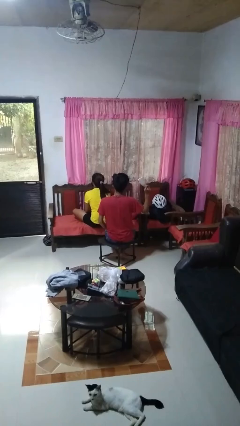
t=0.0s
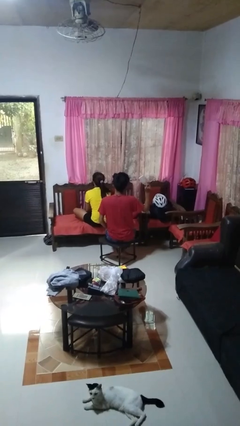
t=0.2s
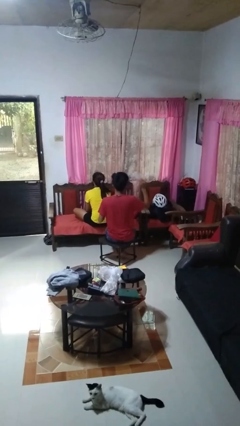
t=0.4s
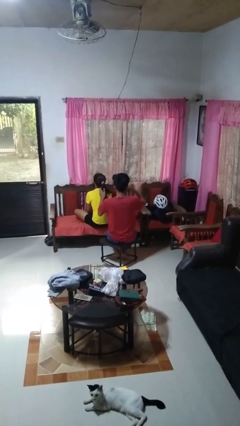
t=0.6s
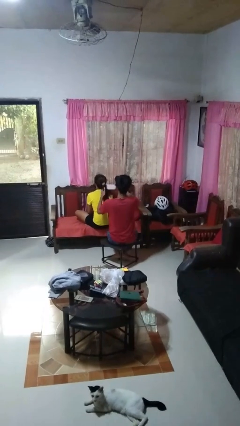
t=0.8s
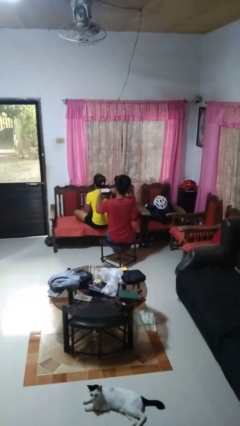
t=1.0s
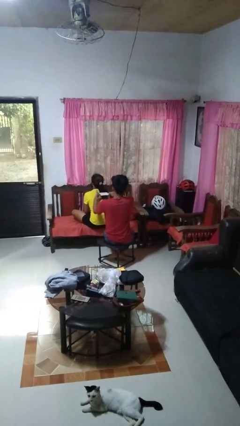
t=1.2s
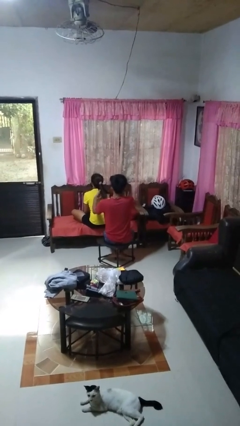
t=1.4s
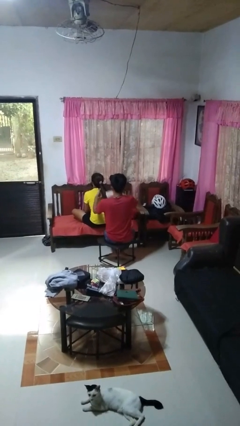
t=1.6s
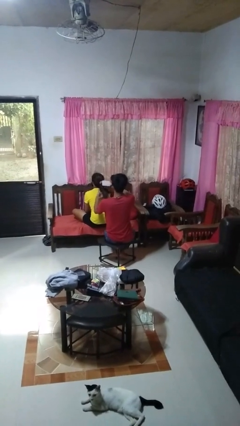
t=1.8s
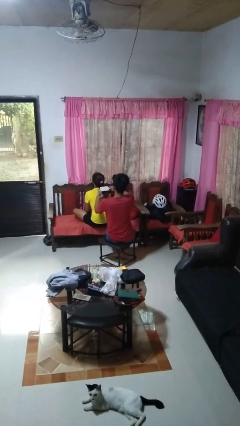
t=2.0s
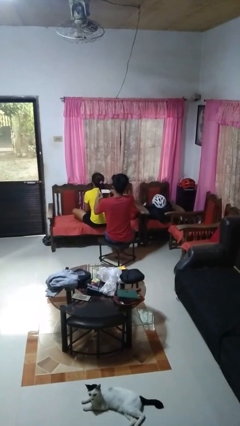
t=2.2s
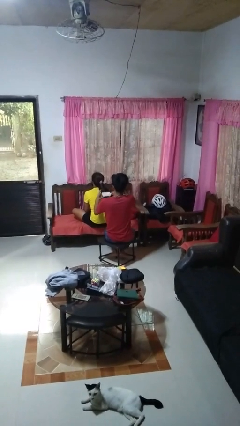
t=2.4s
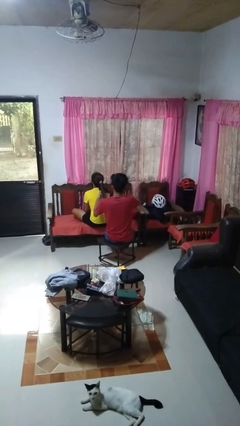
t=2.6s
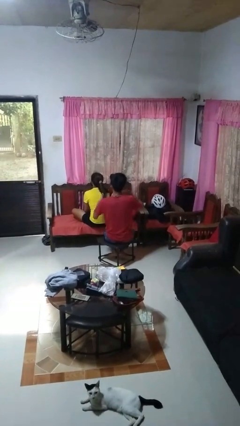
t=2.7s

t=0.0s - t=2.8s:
person brushes hair of person

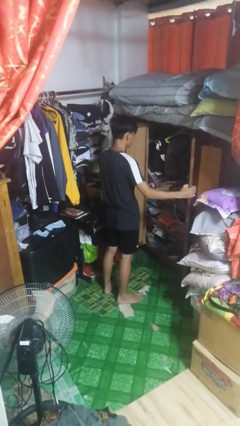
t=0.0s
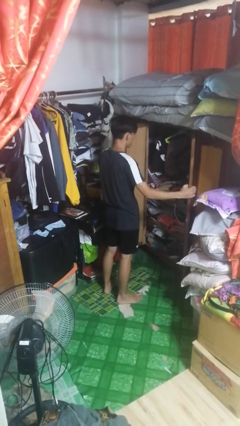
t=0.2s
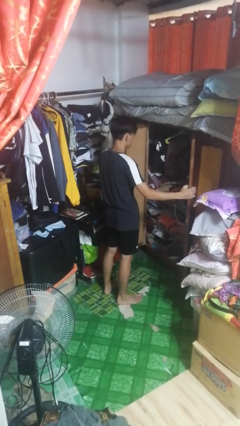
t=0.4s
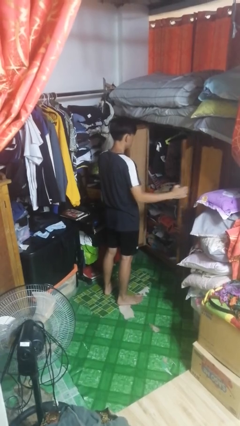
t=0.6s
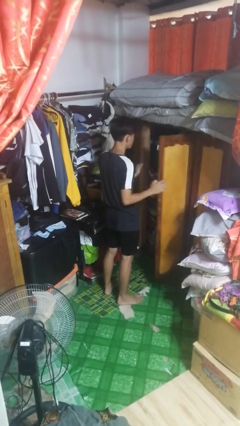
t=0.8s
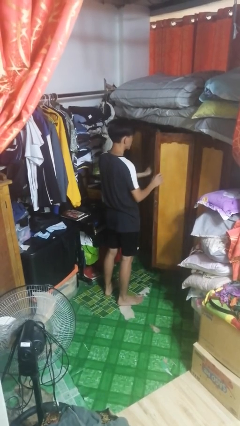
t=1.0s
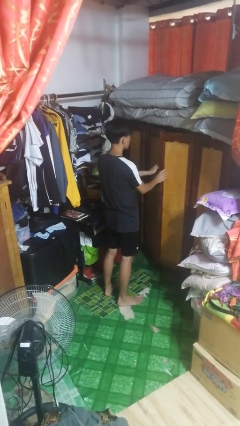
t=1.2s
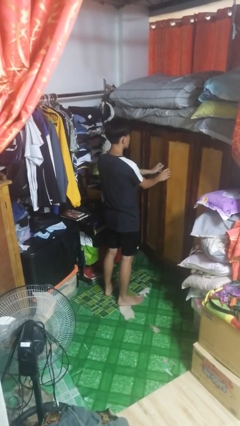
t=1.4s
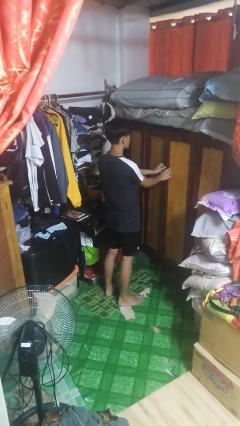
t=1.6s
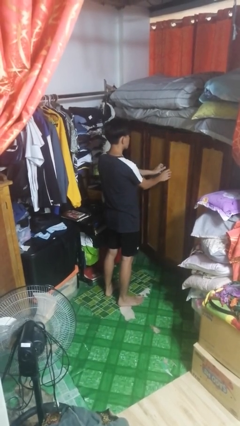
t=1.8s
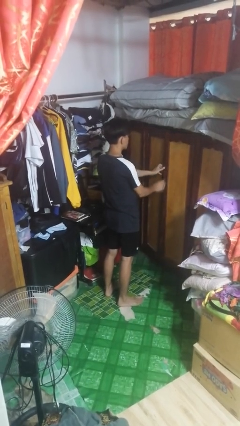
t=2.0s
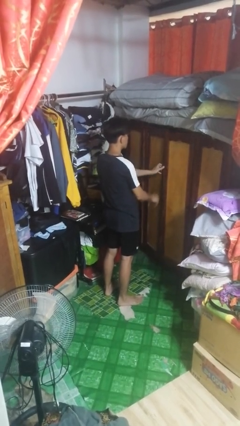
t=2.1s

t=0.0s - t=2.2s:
person closes dresser drawer

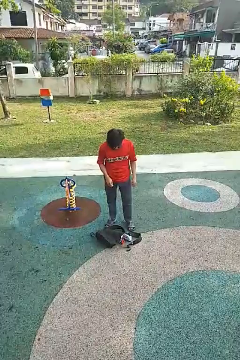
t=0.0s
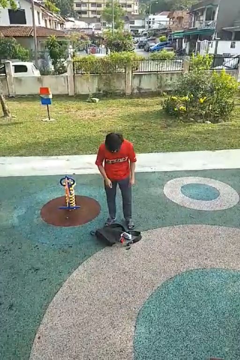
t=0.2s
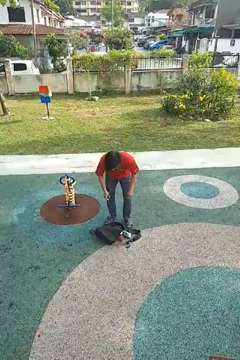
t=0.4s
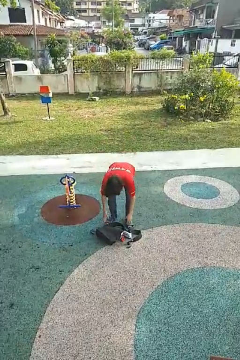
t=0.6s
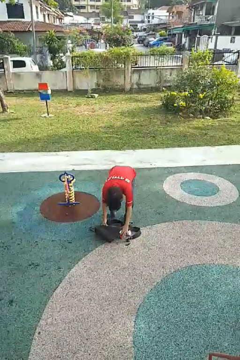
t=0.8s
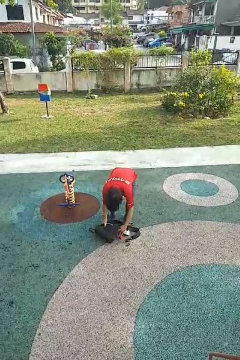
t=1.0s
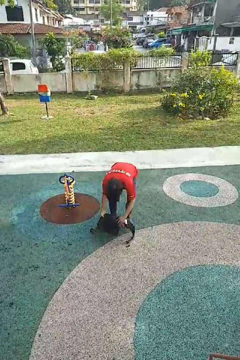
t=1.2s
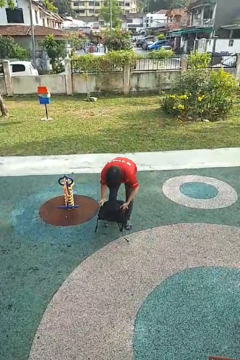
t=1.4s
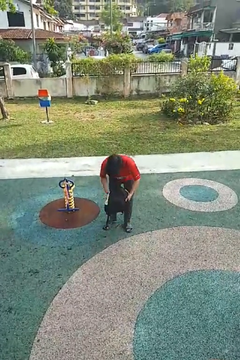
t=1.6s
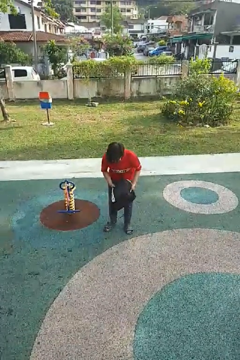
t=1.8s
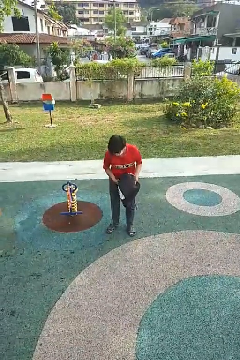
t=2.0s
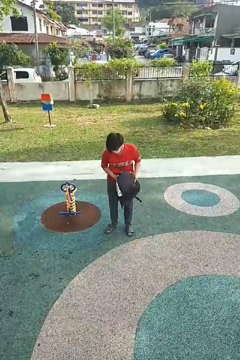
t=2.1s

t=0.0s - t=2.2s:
person picks up object from floor

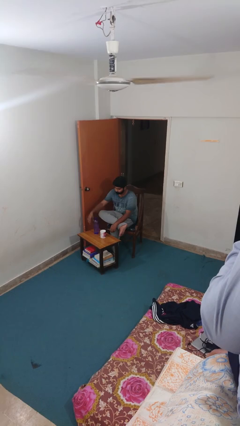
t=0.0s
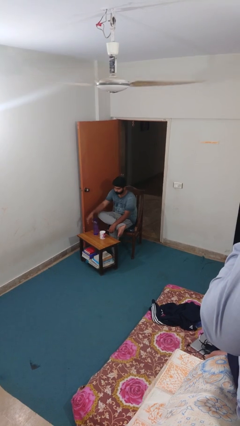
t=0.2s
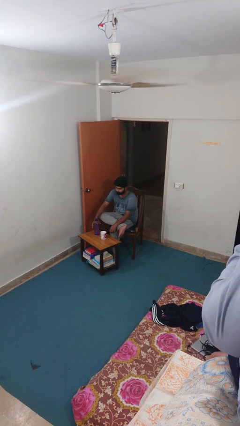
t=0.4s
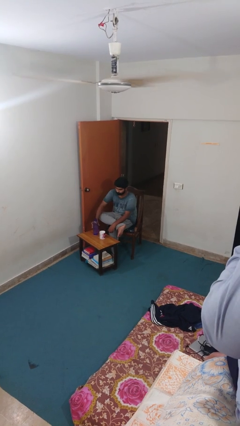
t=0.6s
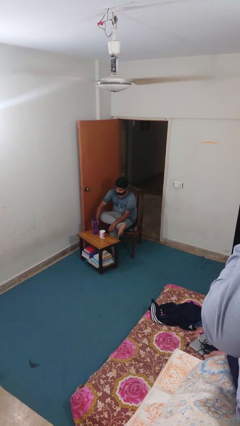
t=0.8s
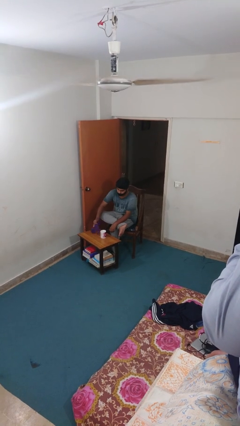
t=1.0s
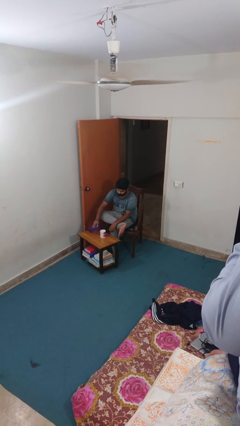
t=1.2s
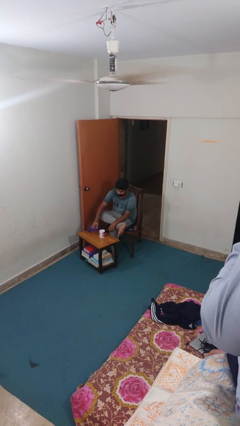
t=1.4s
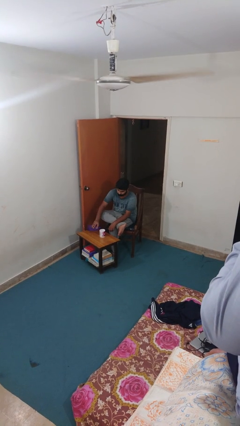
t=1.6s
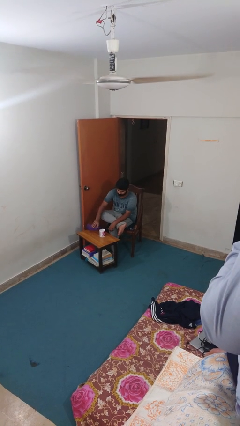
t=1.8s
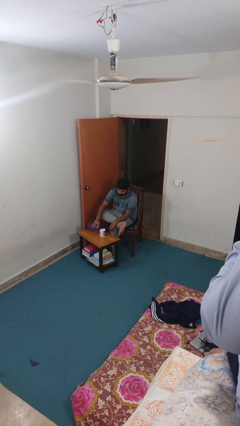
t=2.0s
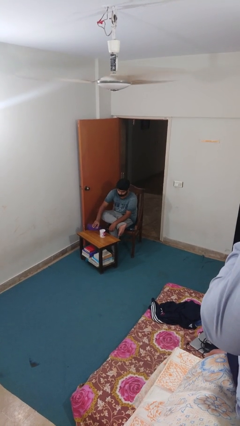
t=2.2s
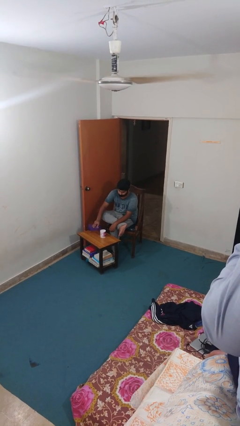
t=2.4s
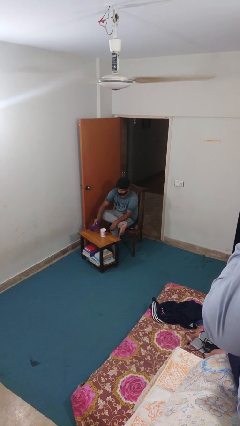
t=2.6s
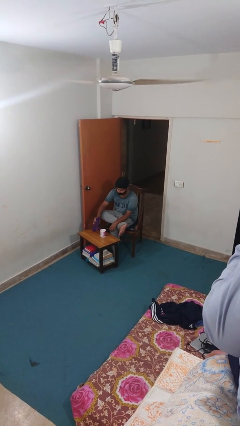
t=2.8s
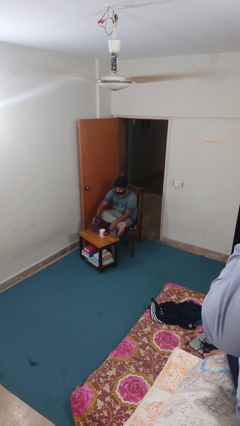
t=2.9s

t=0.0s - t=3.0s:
person pours liquid into cup

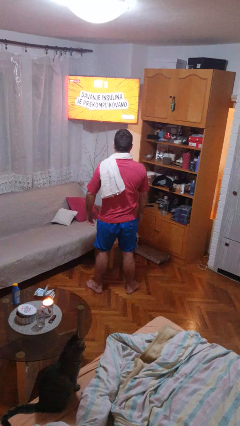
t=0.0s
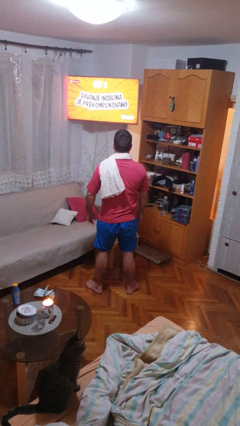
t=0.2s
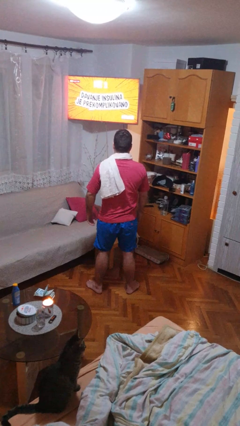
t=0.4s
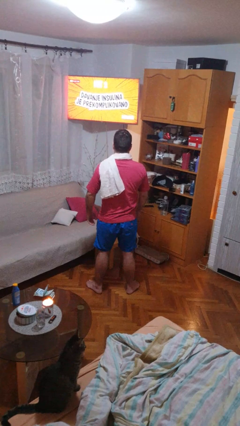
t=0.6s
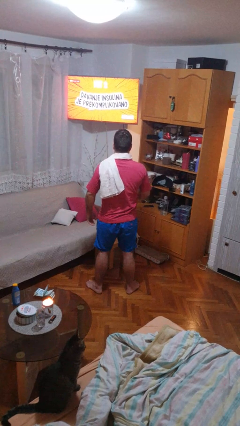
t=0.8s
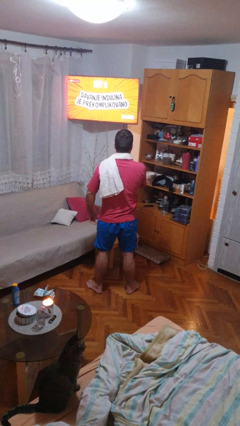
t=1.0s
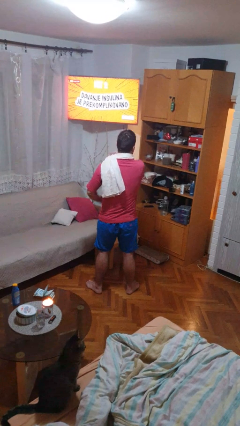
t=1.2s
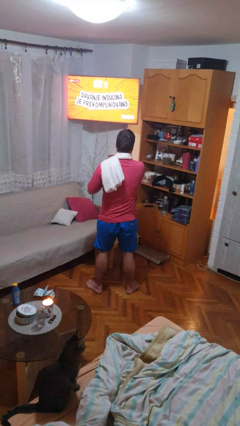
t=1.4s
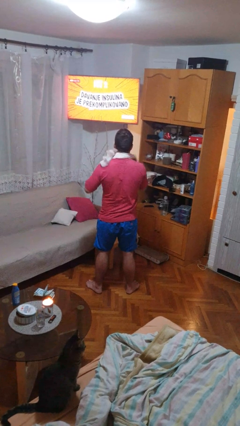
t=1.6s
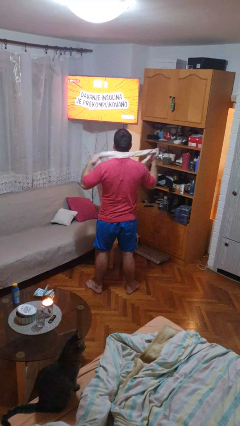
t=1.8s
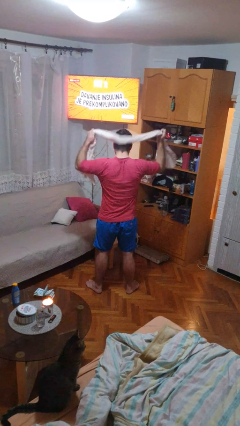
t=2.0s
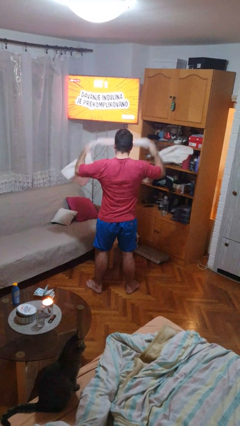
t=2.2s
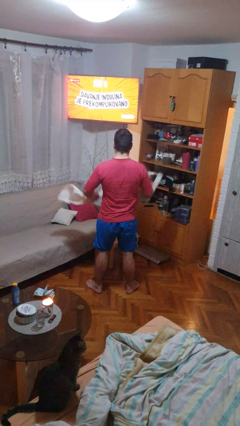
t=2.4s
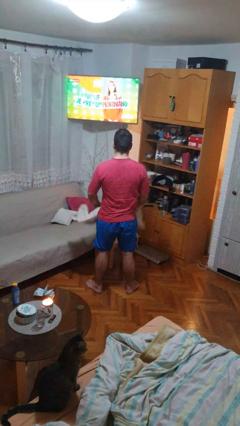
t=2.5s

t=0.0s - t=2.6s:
person takes off scarf

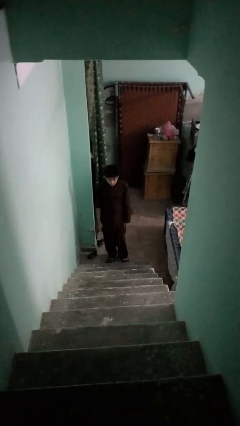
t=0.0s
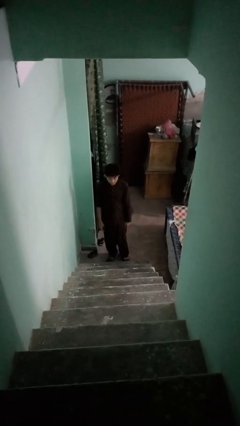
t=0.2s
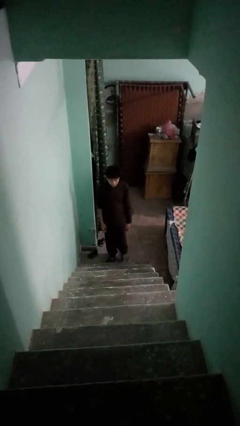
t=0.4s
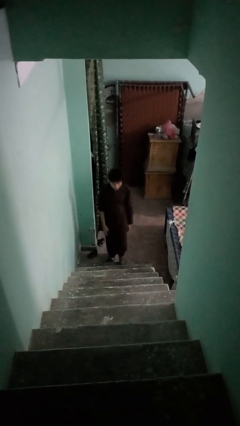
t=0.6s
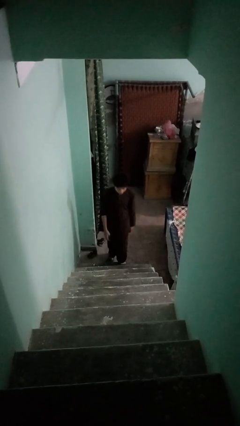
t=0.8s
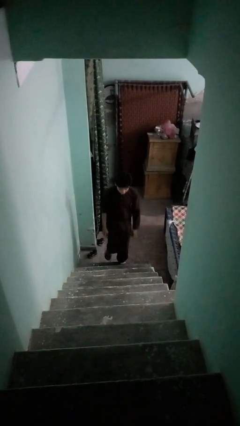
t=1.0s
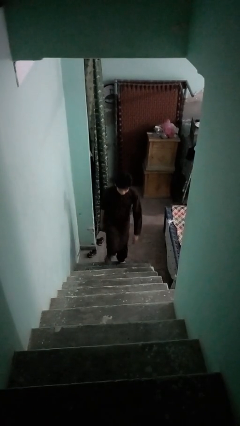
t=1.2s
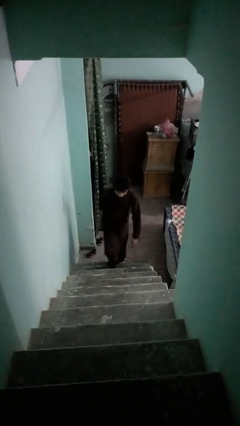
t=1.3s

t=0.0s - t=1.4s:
person climbs up stairs

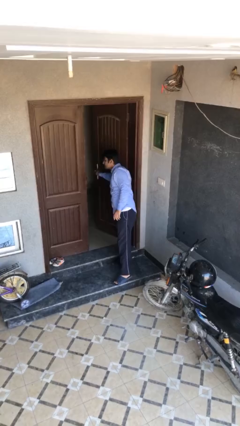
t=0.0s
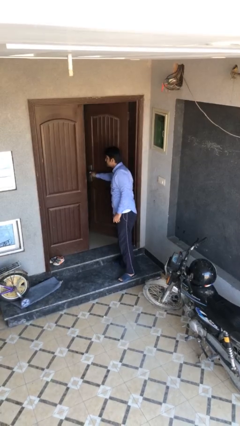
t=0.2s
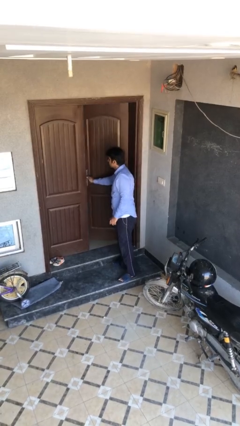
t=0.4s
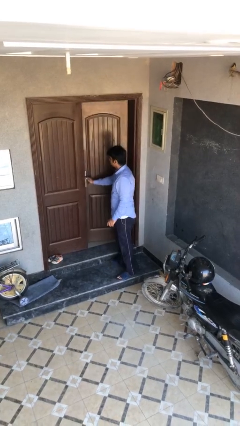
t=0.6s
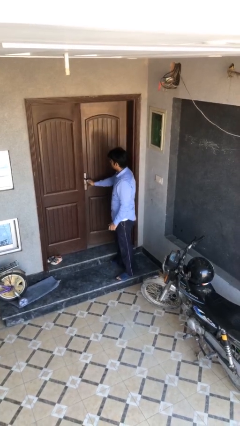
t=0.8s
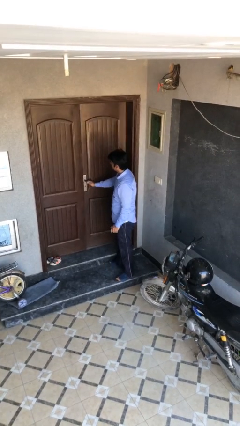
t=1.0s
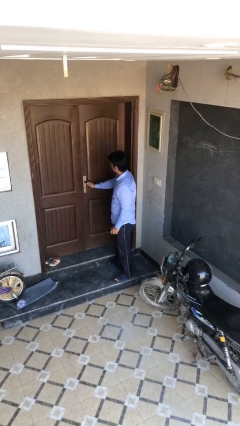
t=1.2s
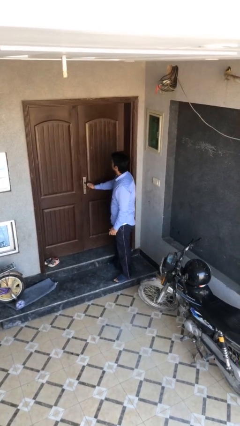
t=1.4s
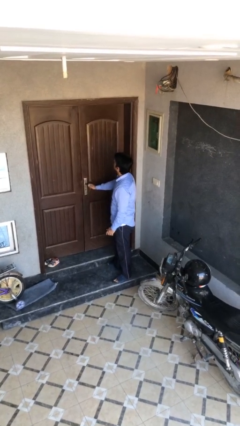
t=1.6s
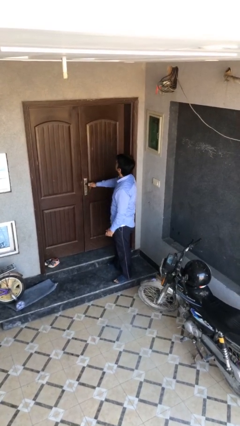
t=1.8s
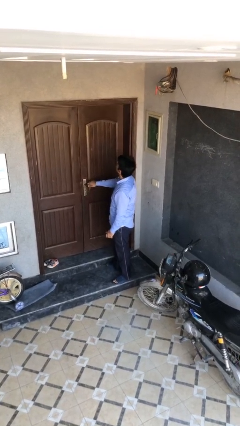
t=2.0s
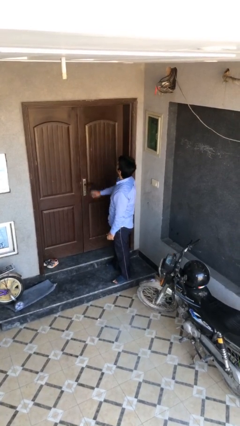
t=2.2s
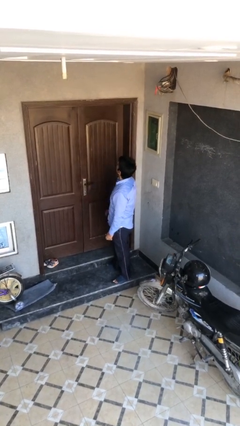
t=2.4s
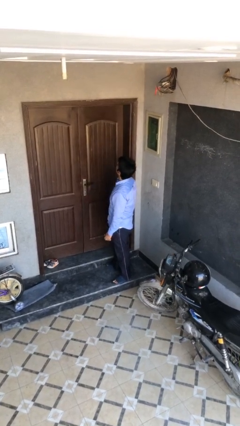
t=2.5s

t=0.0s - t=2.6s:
person closes facility door

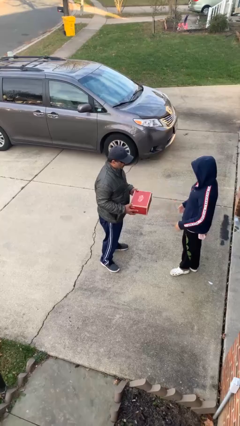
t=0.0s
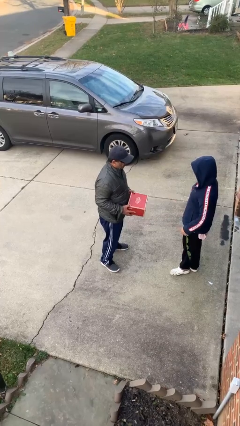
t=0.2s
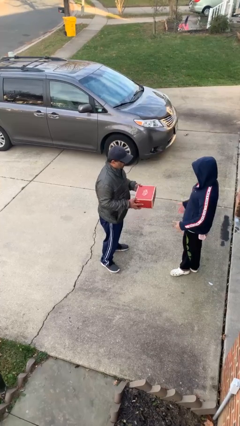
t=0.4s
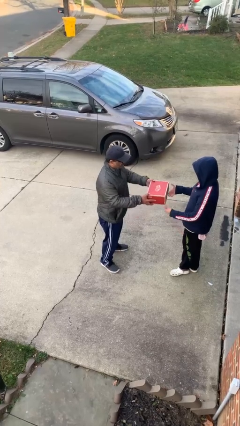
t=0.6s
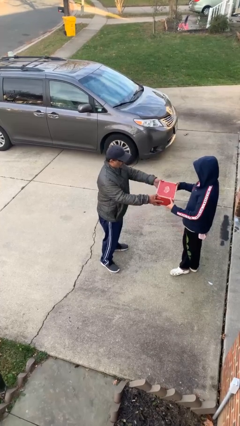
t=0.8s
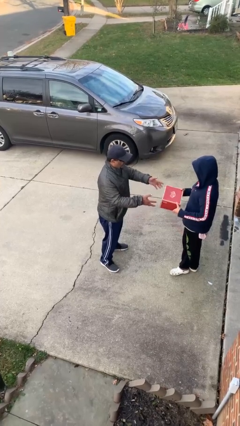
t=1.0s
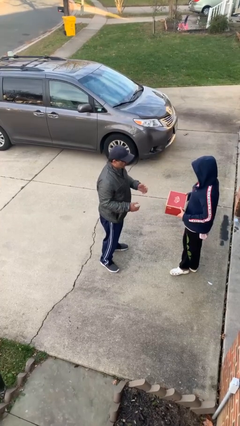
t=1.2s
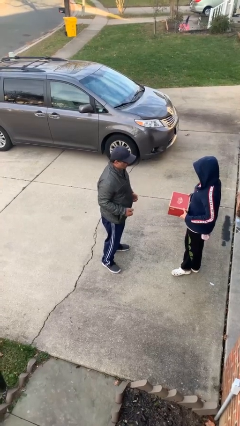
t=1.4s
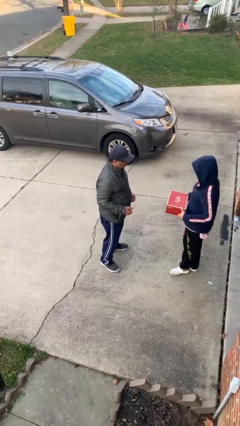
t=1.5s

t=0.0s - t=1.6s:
person transfers object to person
